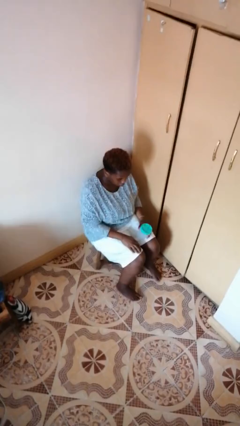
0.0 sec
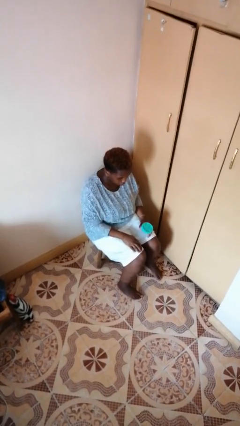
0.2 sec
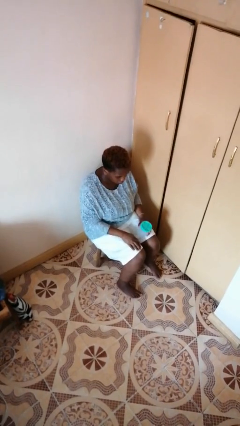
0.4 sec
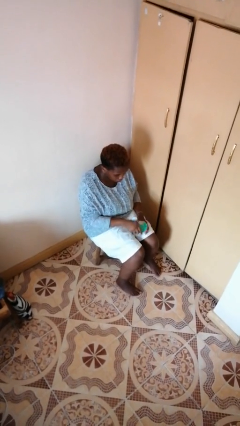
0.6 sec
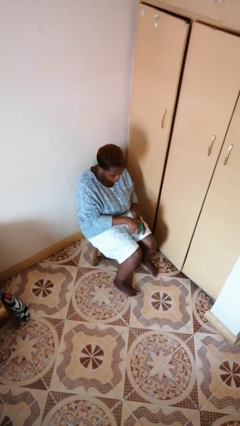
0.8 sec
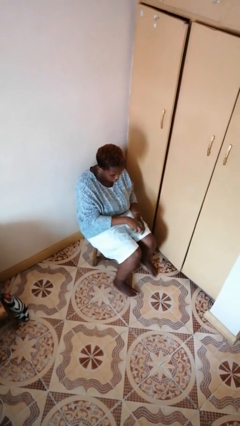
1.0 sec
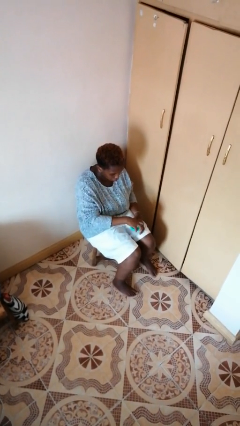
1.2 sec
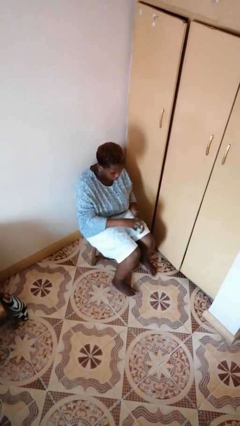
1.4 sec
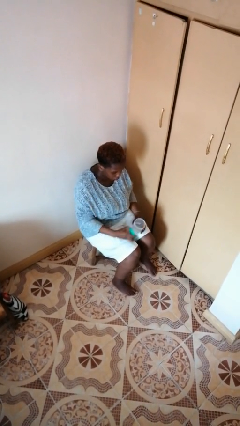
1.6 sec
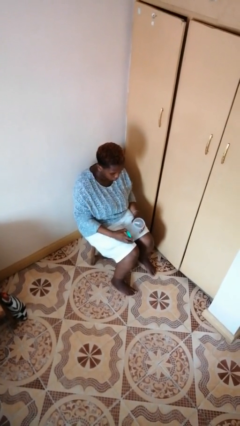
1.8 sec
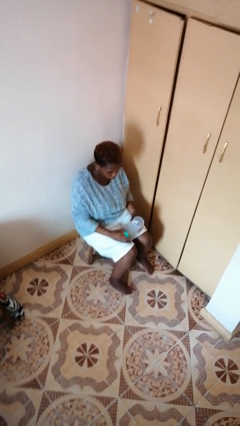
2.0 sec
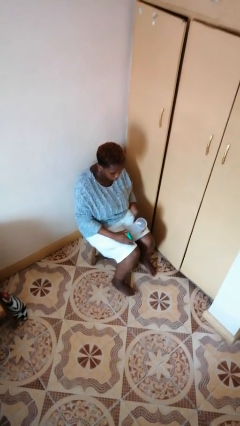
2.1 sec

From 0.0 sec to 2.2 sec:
person opens jar

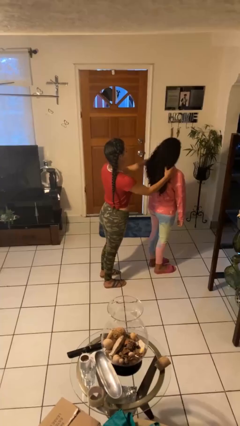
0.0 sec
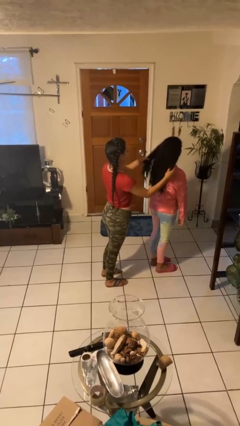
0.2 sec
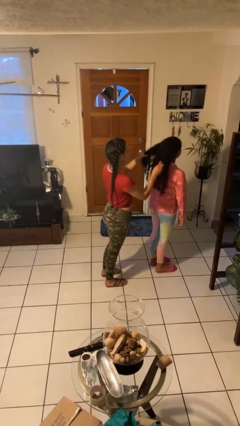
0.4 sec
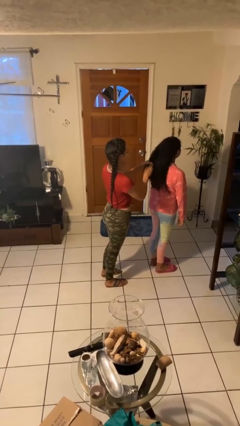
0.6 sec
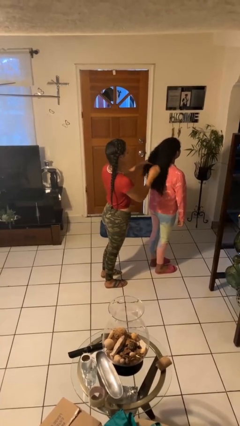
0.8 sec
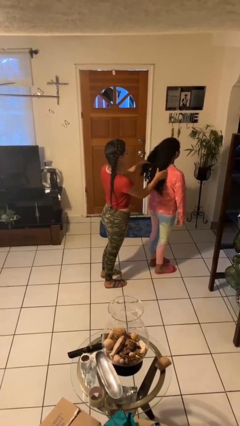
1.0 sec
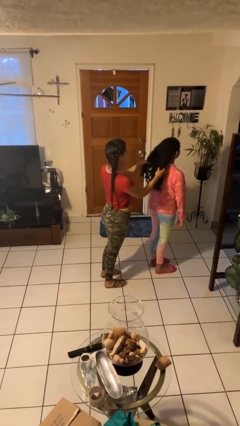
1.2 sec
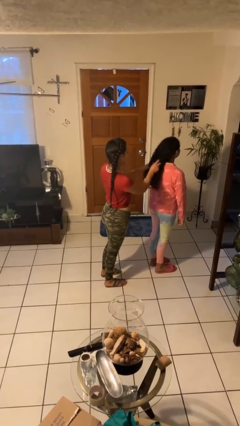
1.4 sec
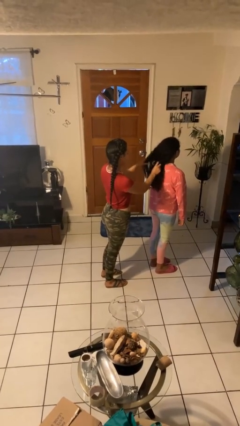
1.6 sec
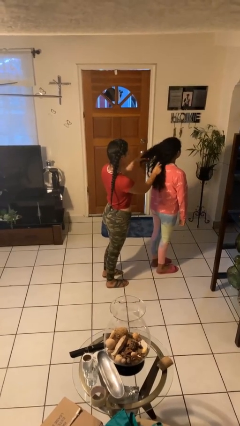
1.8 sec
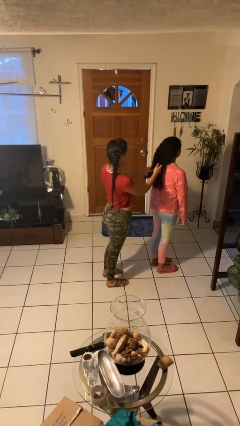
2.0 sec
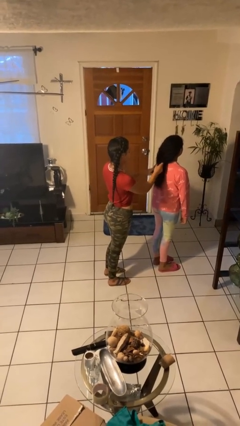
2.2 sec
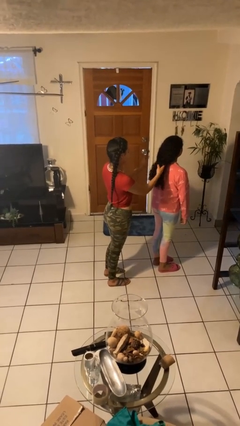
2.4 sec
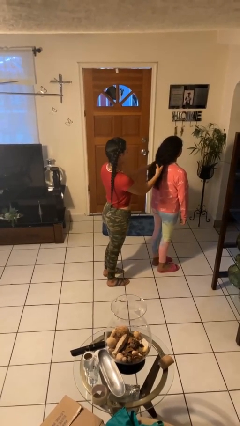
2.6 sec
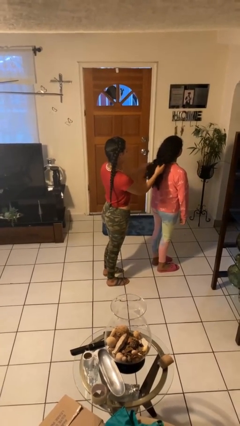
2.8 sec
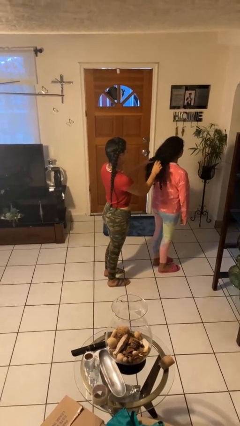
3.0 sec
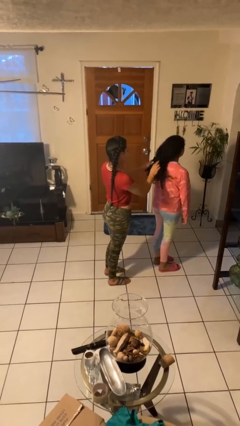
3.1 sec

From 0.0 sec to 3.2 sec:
person braids hair of person

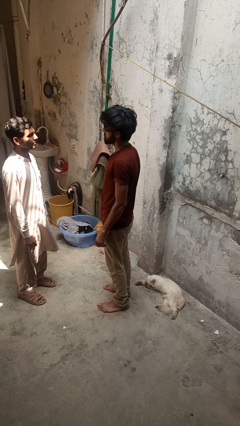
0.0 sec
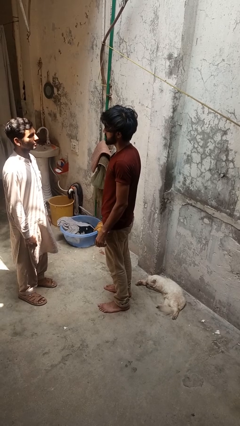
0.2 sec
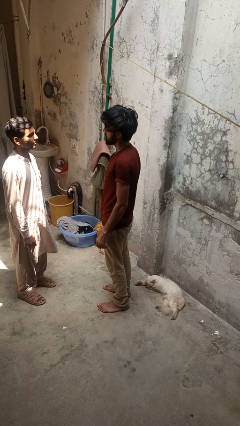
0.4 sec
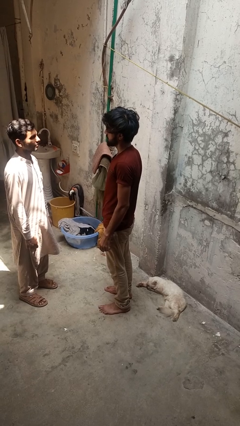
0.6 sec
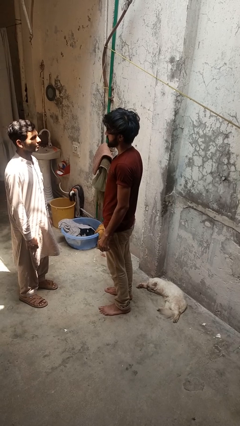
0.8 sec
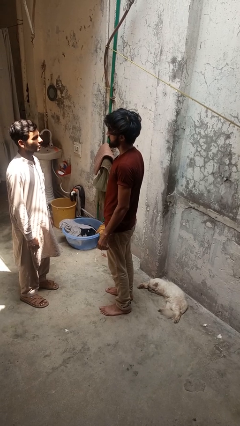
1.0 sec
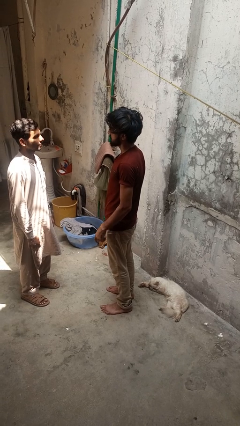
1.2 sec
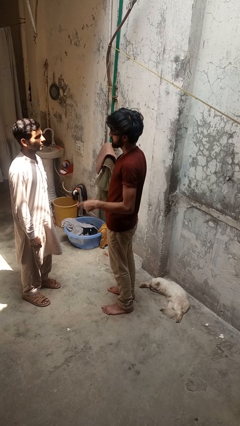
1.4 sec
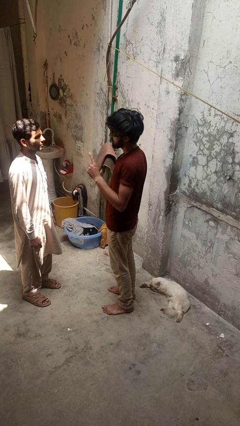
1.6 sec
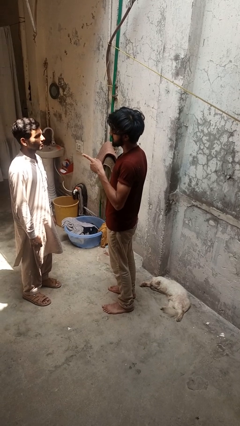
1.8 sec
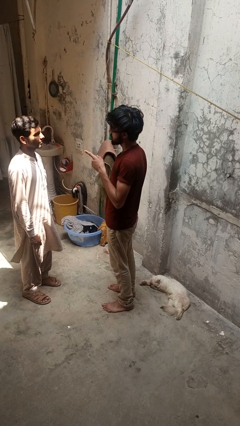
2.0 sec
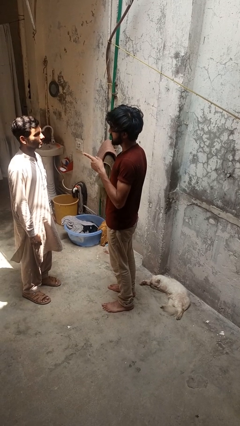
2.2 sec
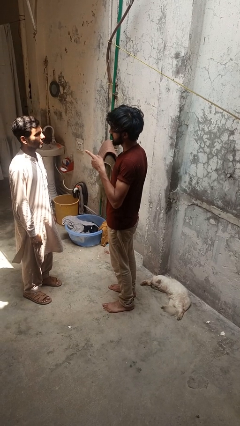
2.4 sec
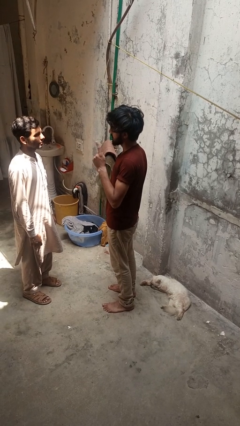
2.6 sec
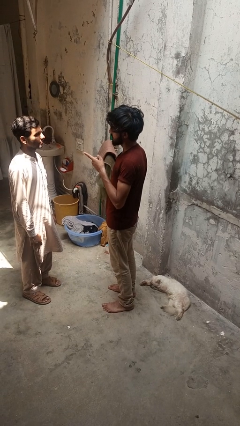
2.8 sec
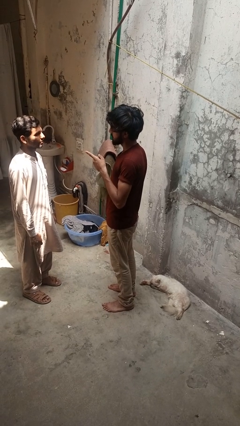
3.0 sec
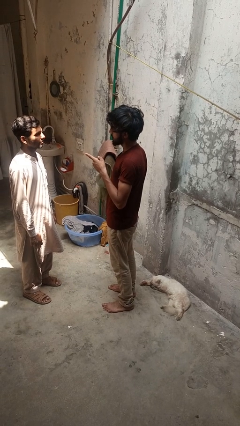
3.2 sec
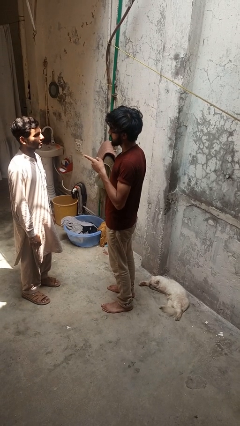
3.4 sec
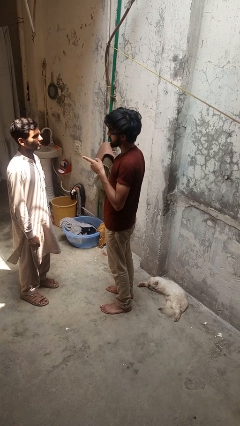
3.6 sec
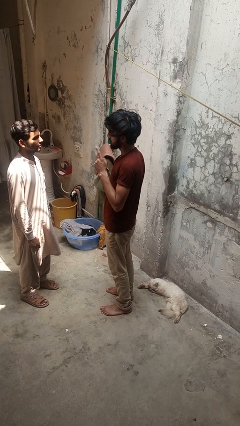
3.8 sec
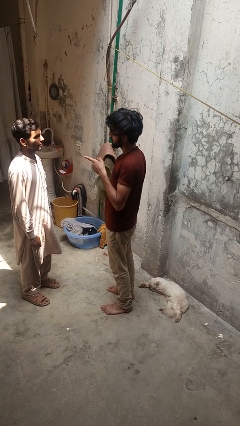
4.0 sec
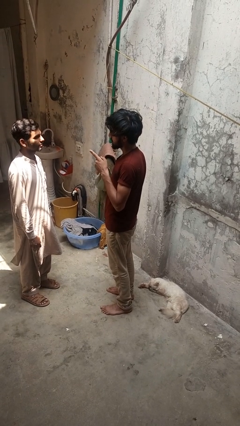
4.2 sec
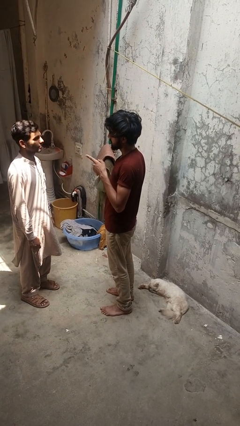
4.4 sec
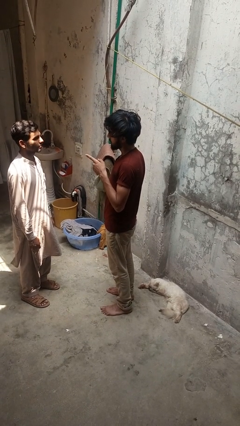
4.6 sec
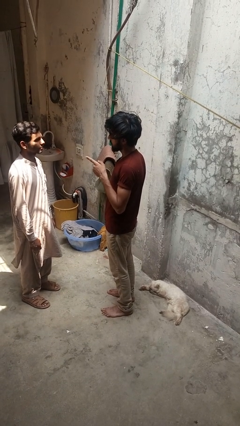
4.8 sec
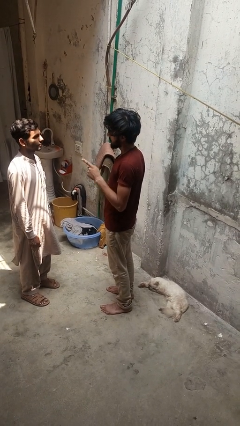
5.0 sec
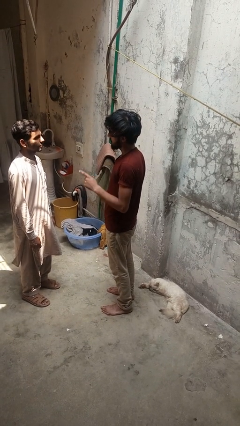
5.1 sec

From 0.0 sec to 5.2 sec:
person points at person

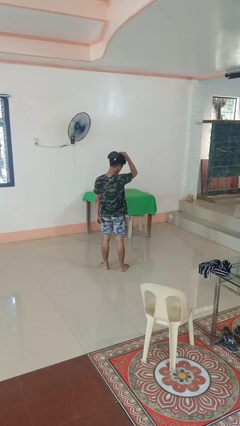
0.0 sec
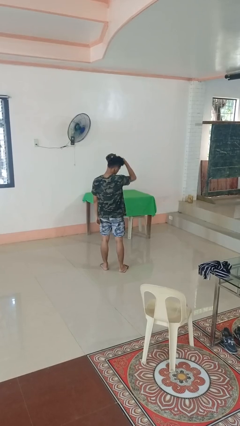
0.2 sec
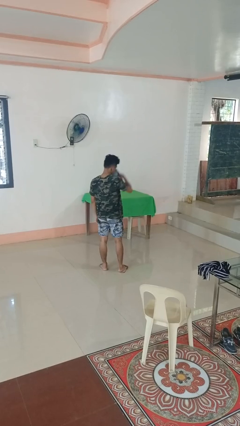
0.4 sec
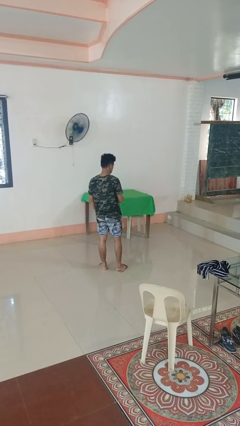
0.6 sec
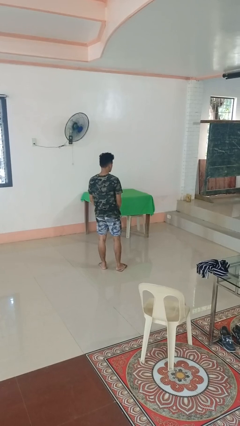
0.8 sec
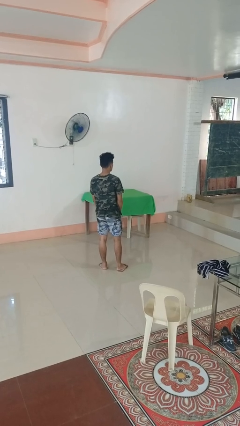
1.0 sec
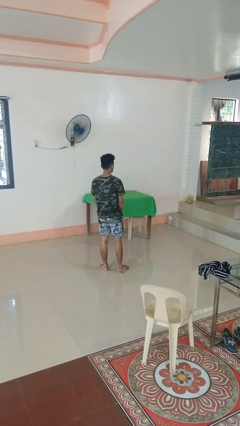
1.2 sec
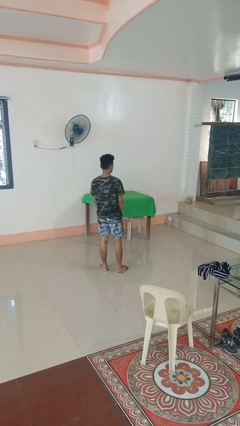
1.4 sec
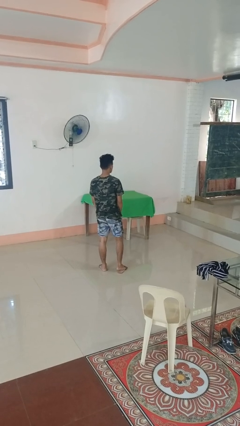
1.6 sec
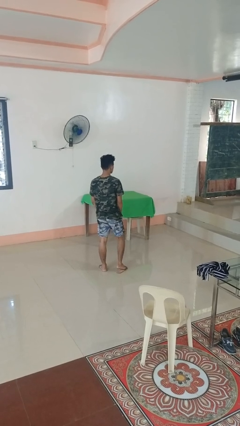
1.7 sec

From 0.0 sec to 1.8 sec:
person takes off hat

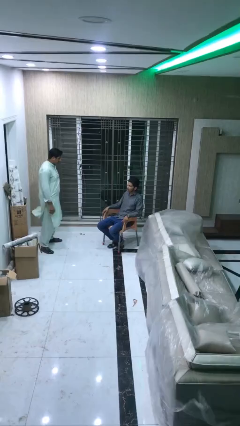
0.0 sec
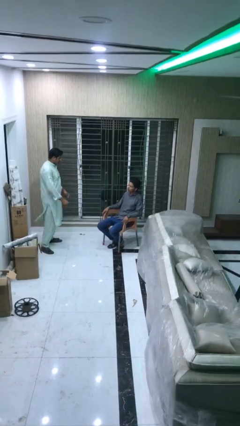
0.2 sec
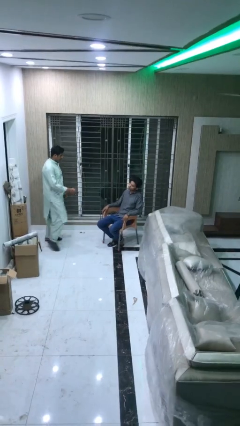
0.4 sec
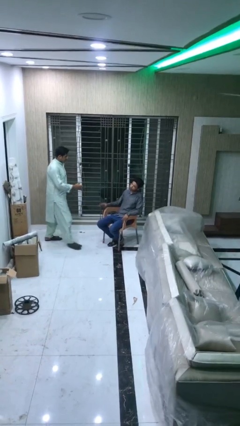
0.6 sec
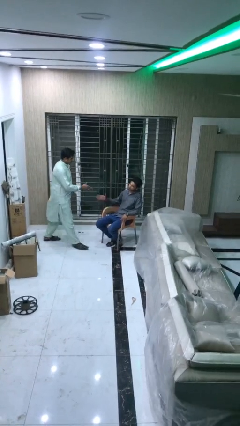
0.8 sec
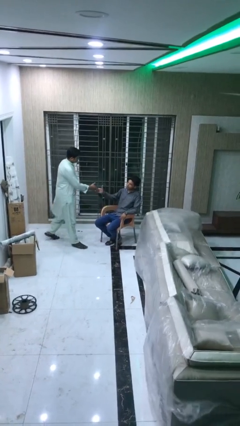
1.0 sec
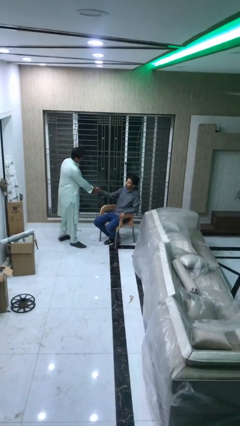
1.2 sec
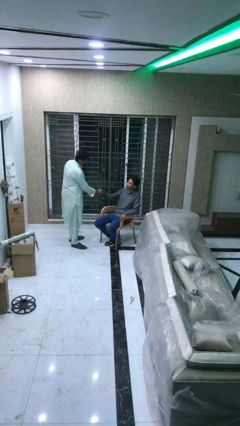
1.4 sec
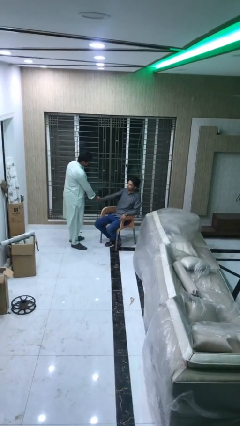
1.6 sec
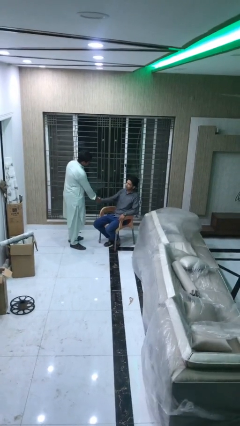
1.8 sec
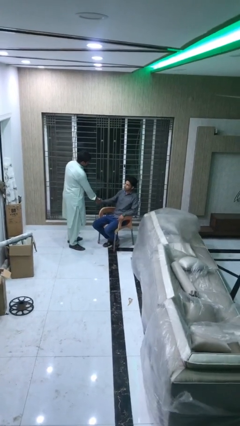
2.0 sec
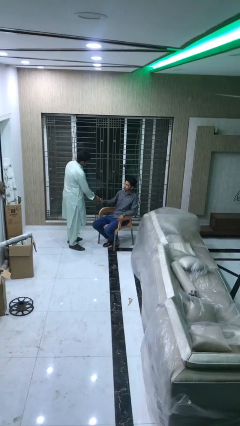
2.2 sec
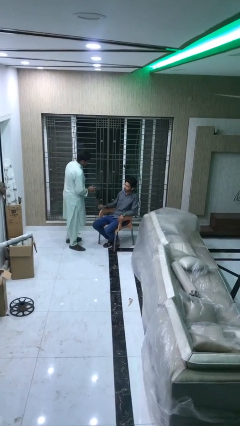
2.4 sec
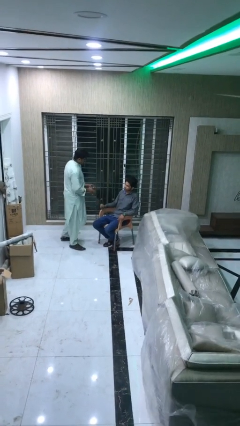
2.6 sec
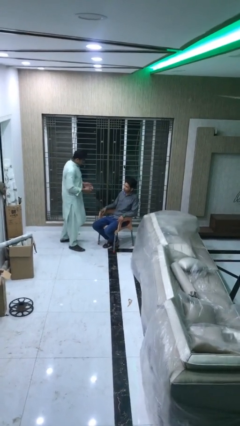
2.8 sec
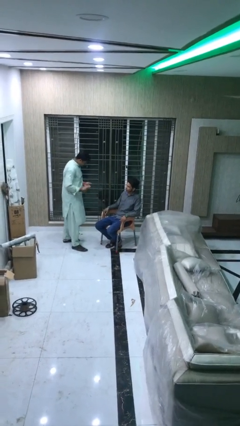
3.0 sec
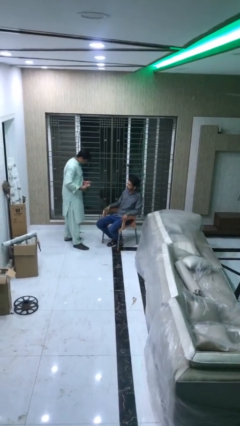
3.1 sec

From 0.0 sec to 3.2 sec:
person shakes hand

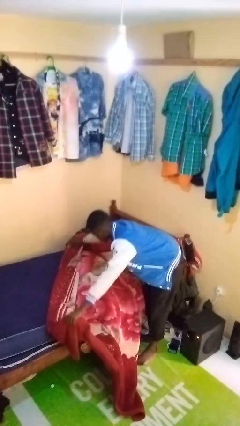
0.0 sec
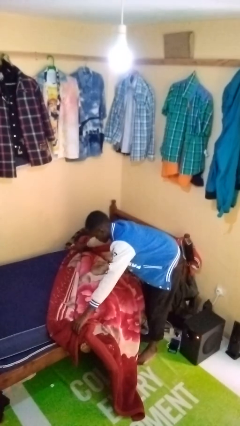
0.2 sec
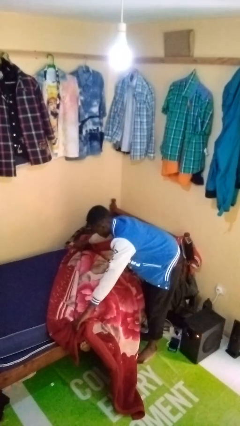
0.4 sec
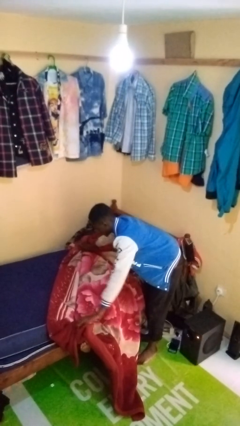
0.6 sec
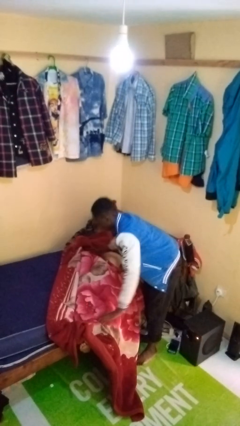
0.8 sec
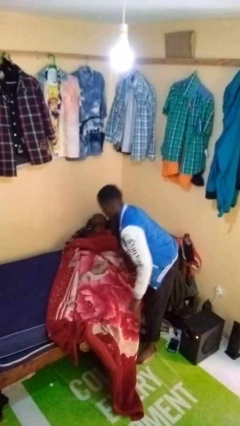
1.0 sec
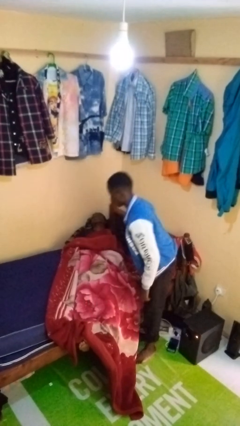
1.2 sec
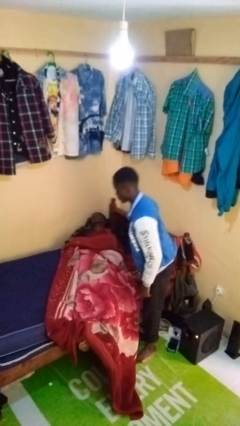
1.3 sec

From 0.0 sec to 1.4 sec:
person covers friend with blanket

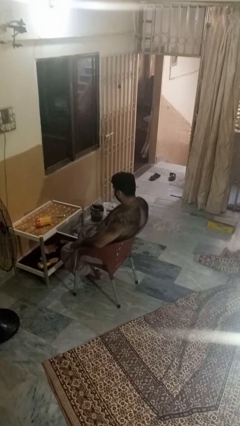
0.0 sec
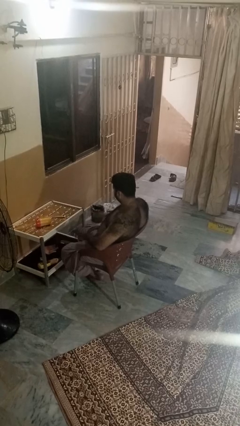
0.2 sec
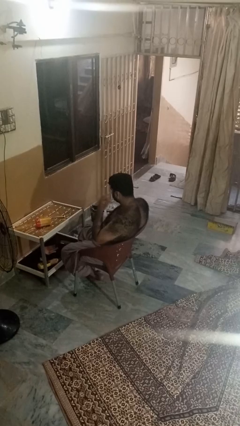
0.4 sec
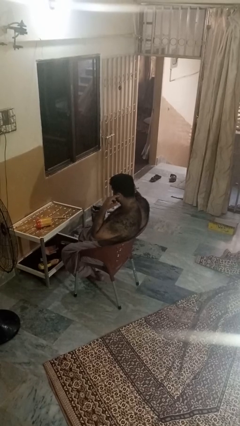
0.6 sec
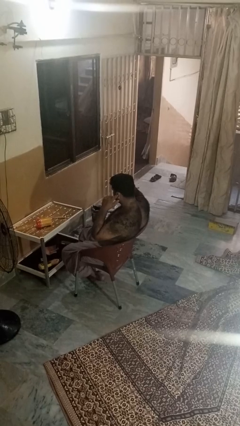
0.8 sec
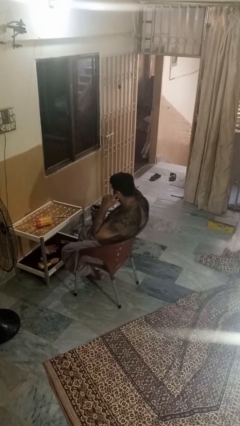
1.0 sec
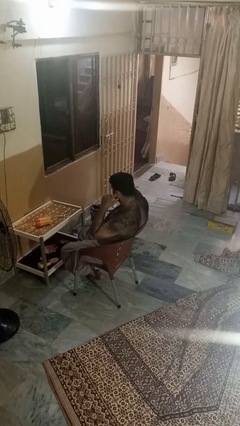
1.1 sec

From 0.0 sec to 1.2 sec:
person puts fingers in ear
